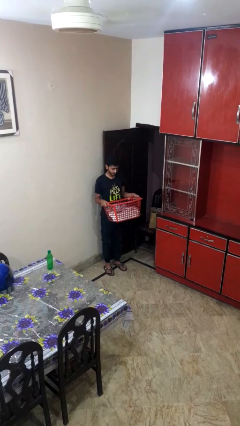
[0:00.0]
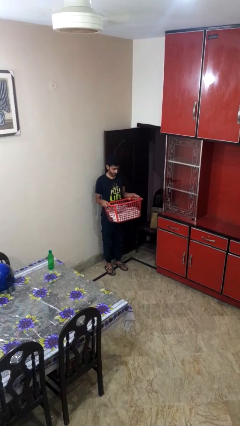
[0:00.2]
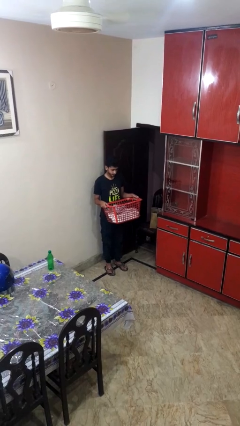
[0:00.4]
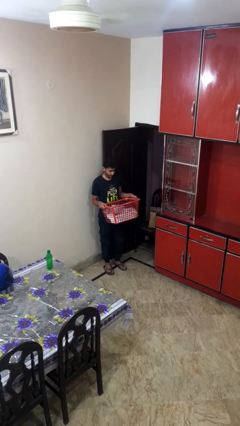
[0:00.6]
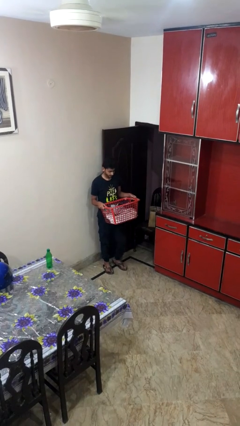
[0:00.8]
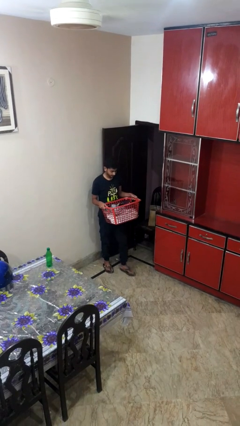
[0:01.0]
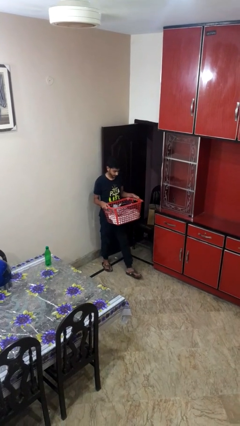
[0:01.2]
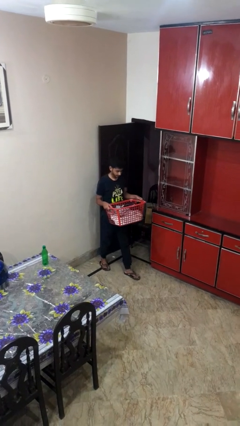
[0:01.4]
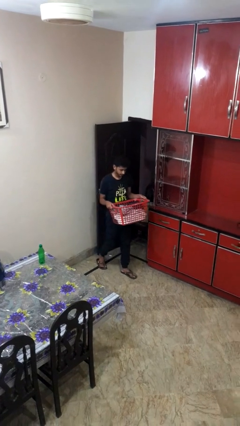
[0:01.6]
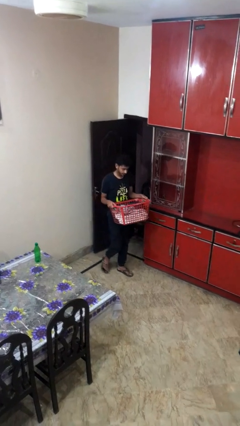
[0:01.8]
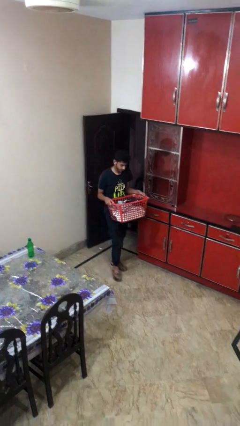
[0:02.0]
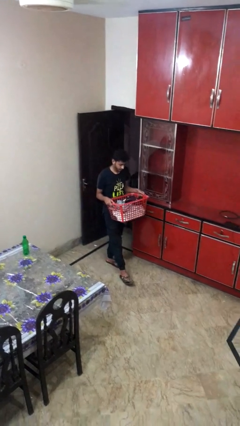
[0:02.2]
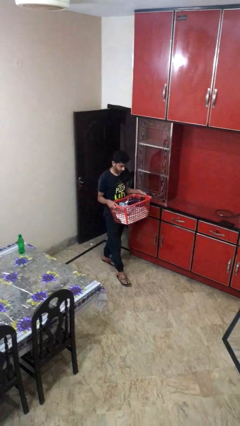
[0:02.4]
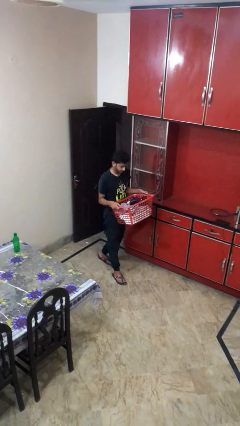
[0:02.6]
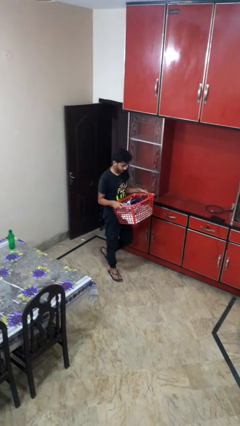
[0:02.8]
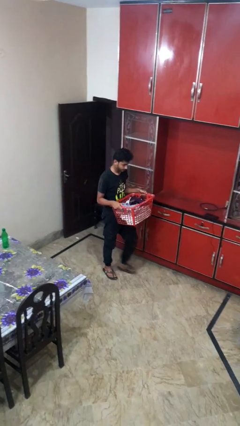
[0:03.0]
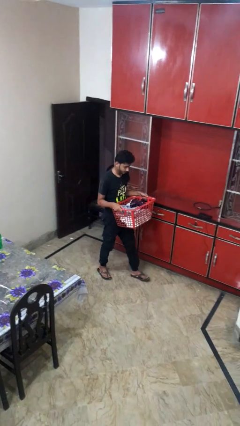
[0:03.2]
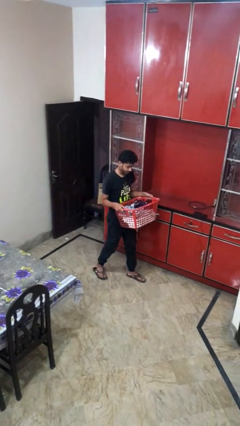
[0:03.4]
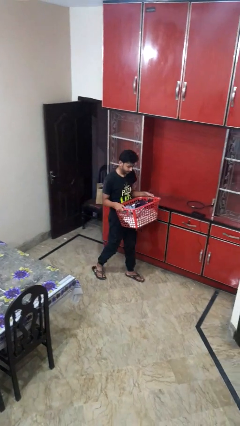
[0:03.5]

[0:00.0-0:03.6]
person carries furniture

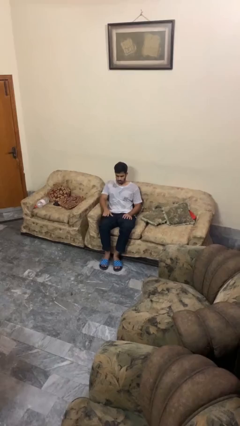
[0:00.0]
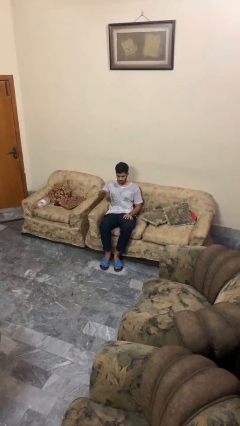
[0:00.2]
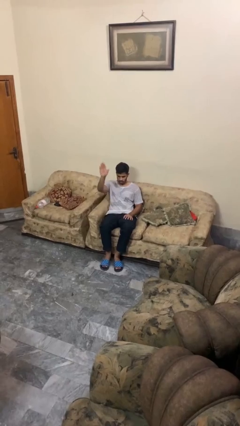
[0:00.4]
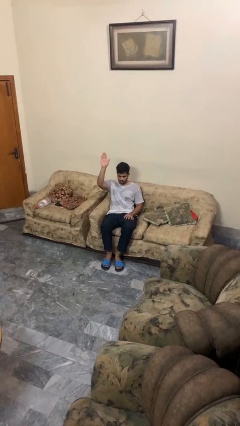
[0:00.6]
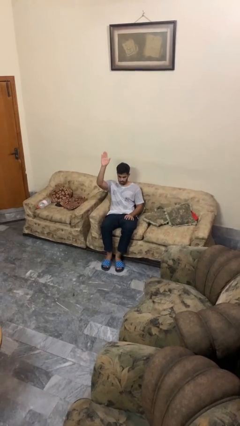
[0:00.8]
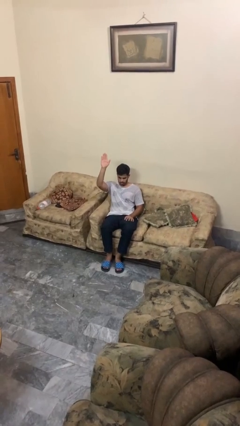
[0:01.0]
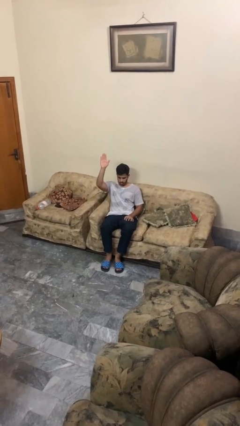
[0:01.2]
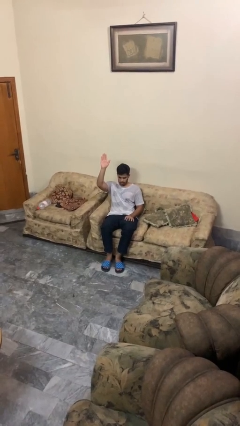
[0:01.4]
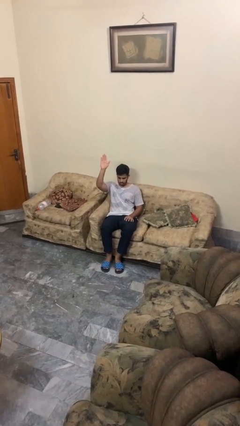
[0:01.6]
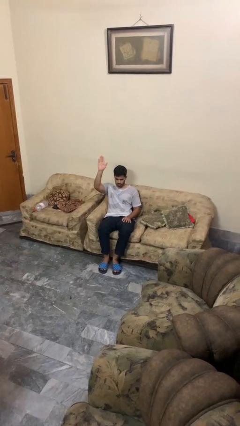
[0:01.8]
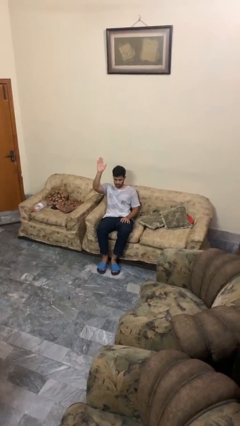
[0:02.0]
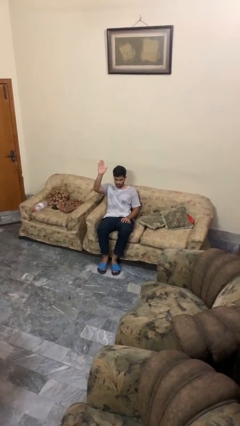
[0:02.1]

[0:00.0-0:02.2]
person gestures raise hand

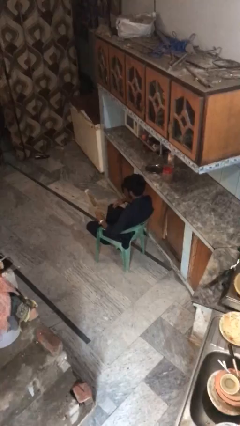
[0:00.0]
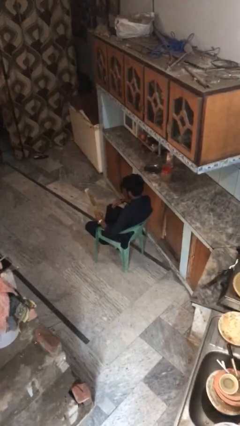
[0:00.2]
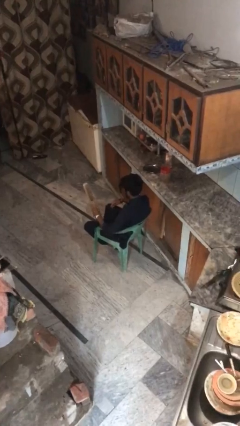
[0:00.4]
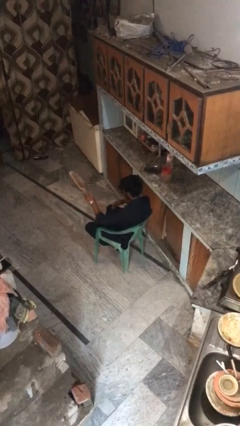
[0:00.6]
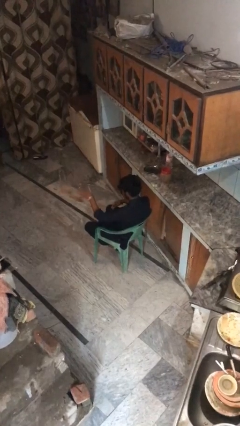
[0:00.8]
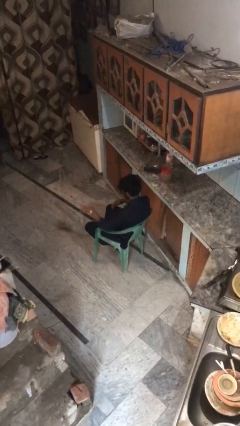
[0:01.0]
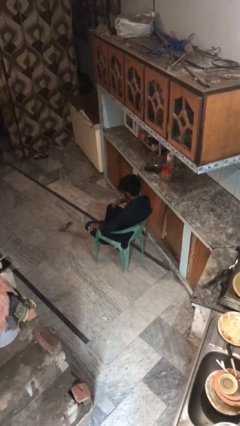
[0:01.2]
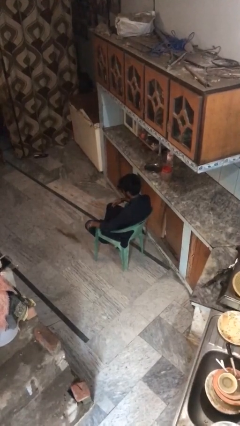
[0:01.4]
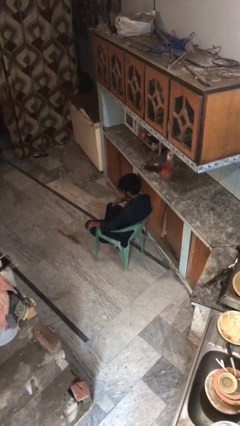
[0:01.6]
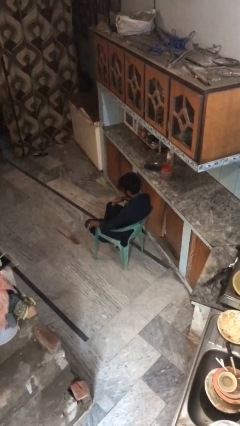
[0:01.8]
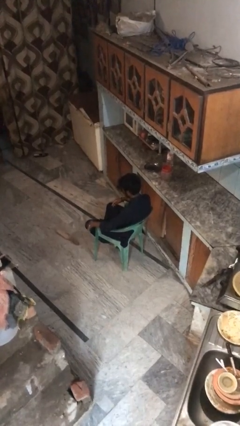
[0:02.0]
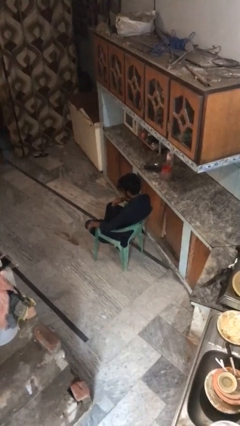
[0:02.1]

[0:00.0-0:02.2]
person throws object to ground

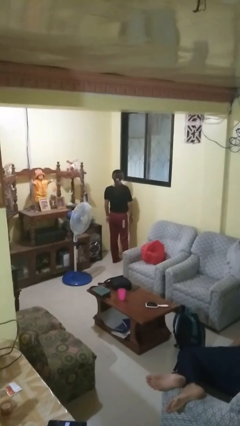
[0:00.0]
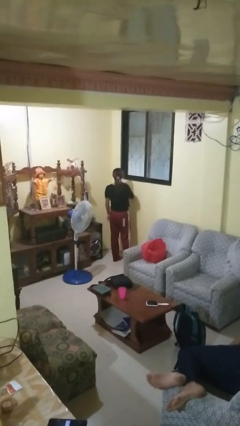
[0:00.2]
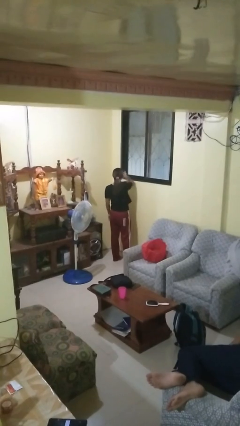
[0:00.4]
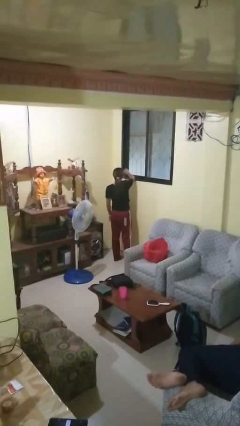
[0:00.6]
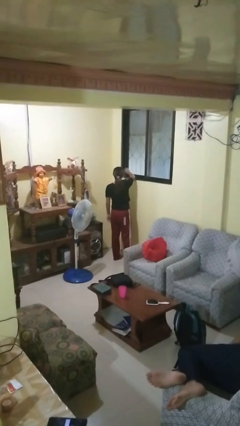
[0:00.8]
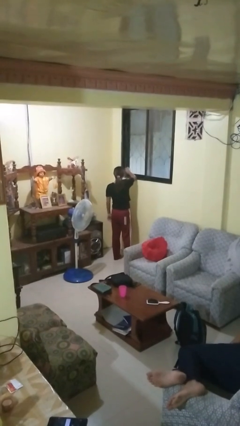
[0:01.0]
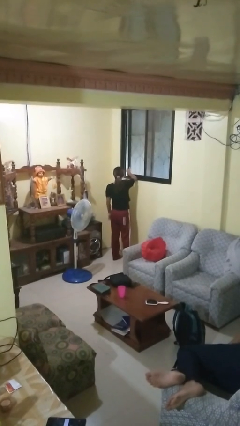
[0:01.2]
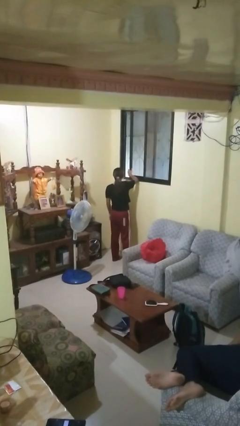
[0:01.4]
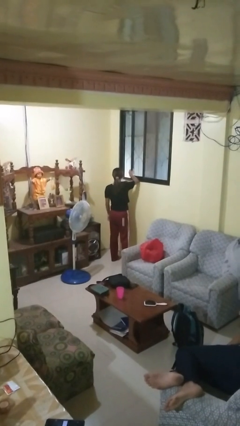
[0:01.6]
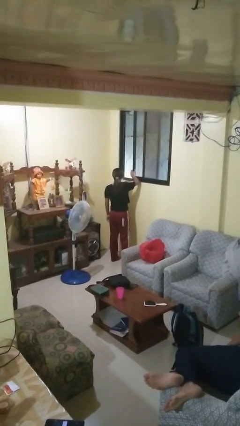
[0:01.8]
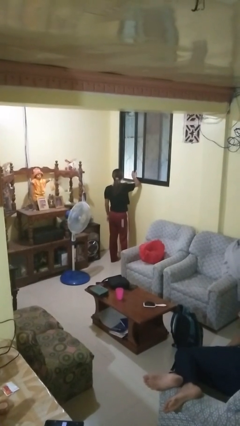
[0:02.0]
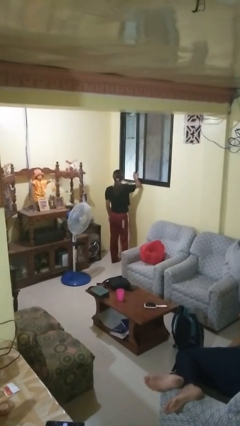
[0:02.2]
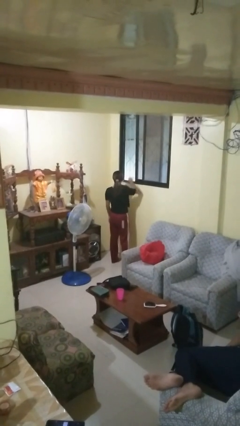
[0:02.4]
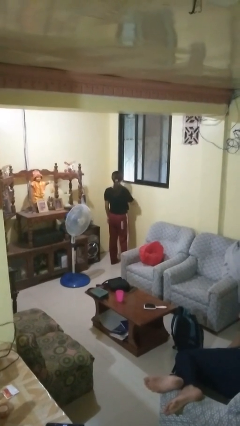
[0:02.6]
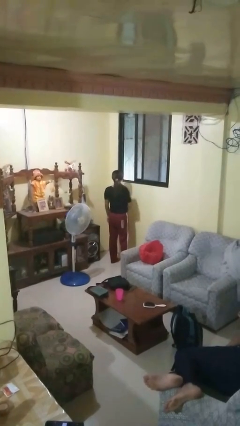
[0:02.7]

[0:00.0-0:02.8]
person opens home window

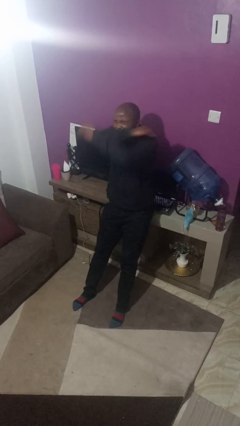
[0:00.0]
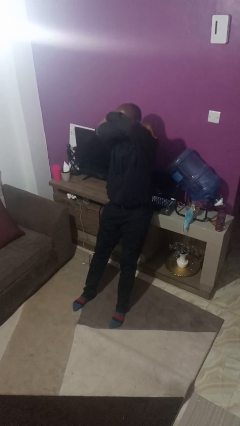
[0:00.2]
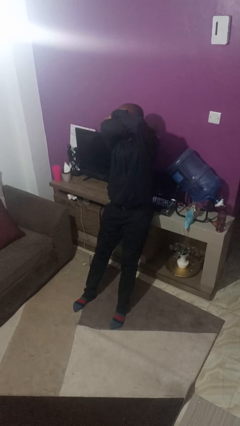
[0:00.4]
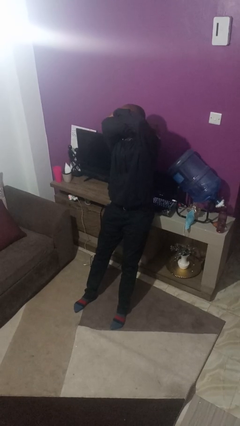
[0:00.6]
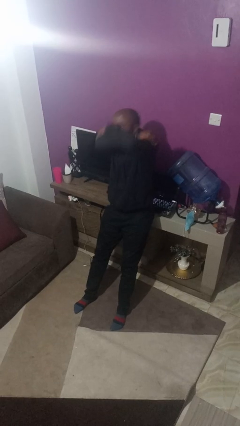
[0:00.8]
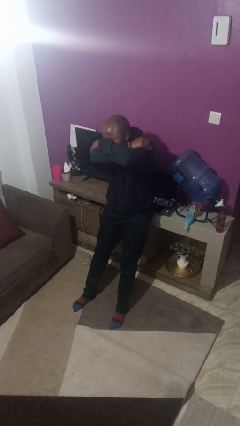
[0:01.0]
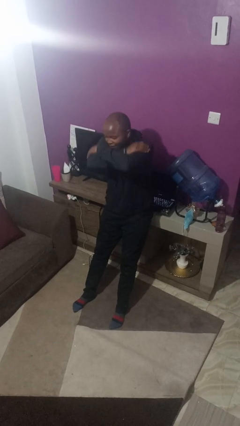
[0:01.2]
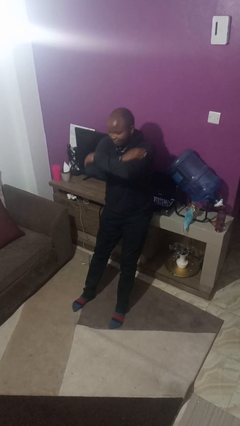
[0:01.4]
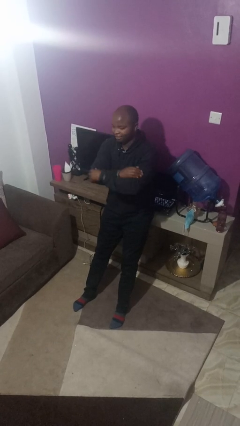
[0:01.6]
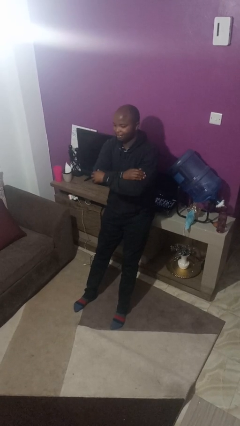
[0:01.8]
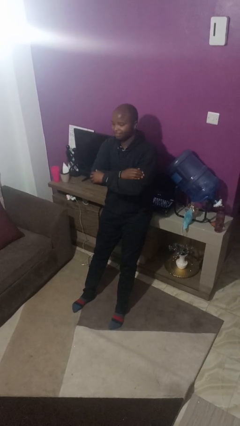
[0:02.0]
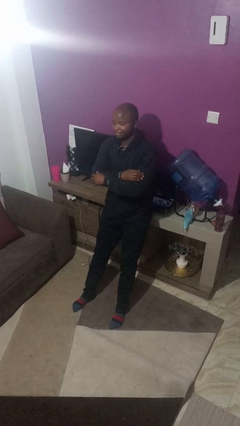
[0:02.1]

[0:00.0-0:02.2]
person sneezes into hand

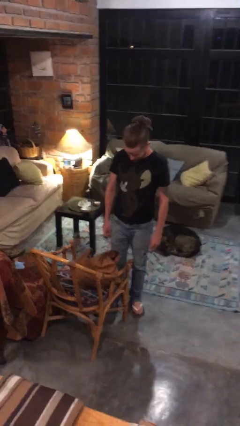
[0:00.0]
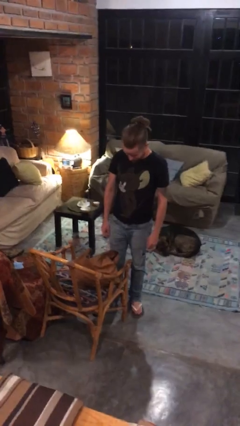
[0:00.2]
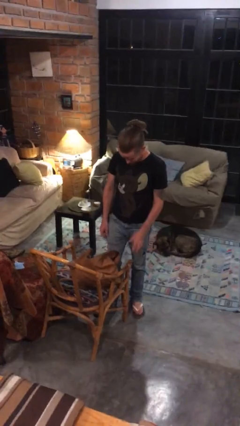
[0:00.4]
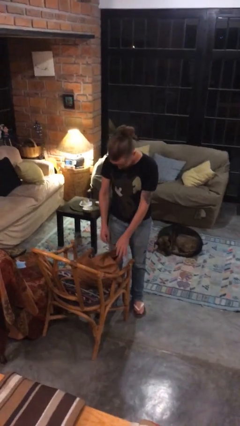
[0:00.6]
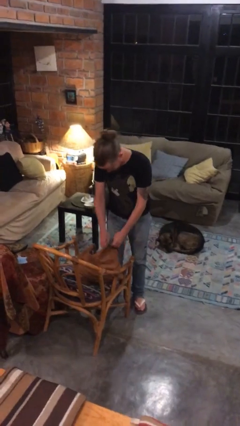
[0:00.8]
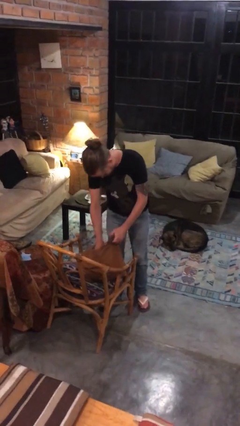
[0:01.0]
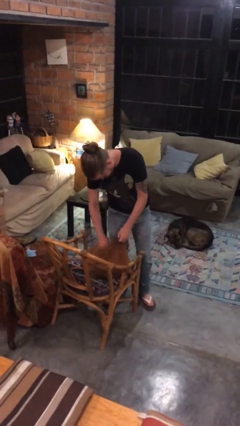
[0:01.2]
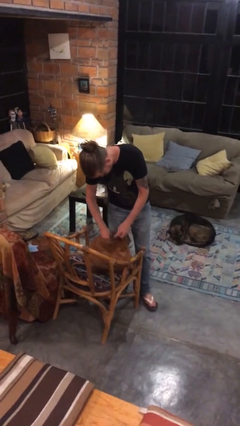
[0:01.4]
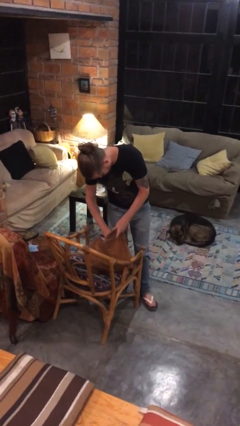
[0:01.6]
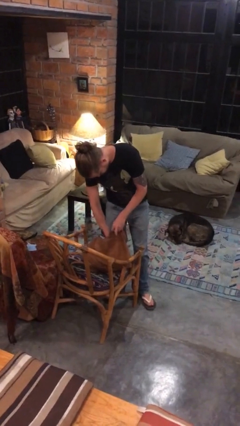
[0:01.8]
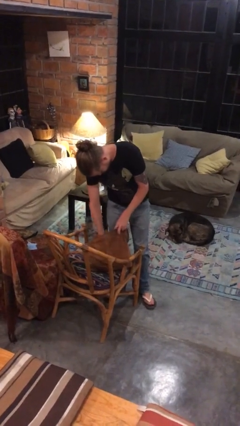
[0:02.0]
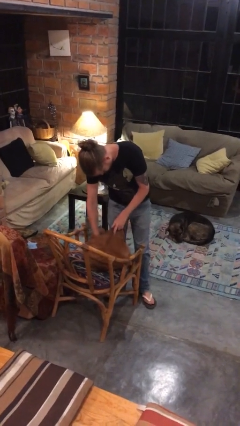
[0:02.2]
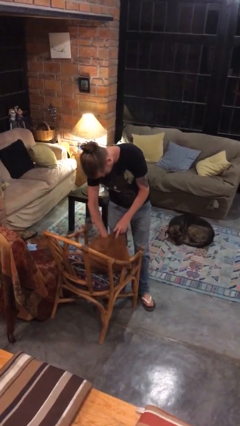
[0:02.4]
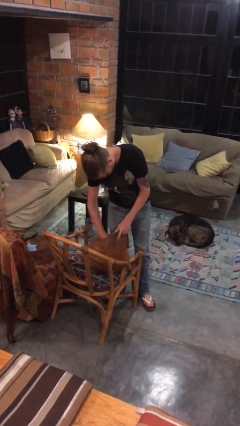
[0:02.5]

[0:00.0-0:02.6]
person searches in purse

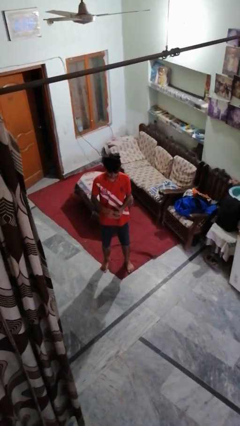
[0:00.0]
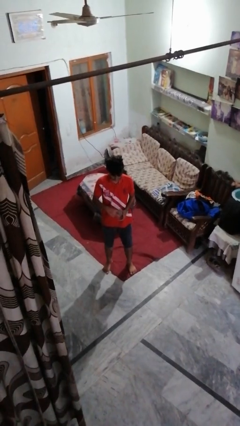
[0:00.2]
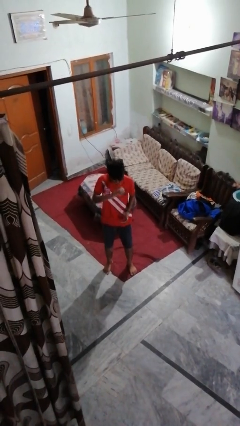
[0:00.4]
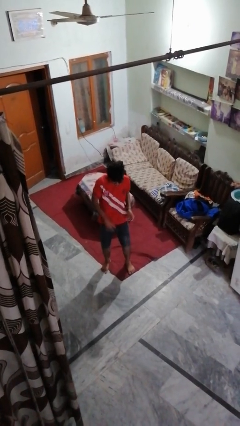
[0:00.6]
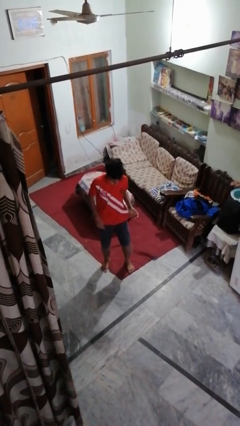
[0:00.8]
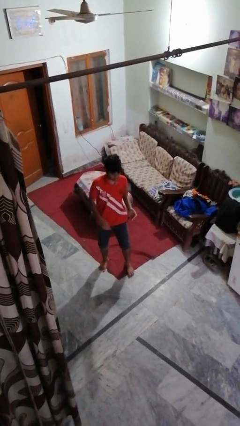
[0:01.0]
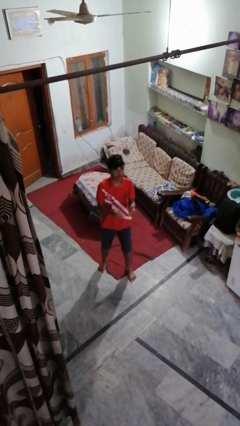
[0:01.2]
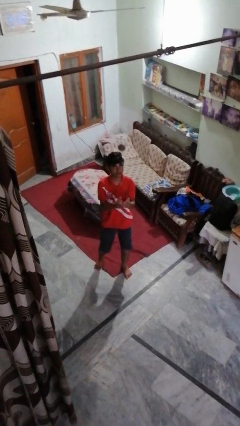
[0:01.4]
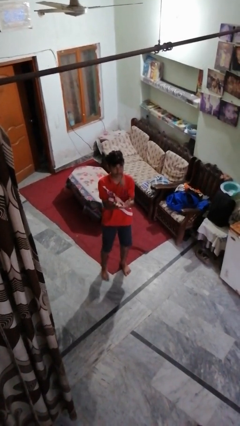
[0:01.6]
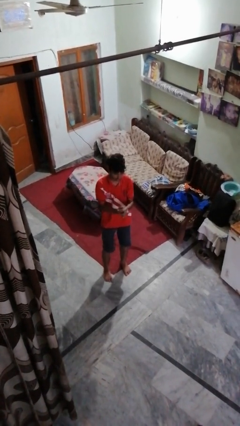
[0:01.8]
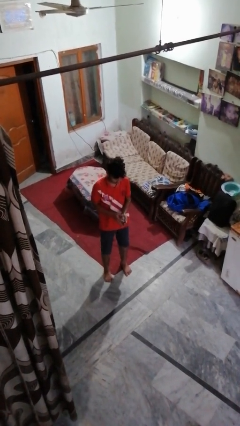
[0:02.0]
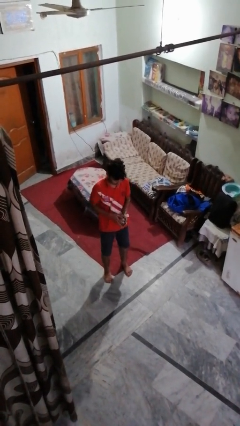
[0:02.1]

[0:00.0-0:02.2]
person bounces ball on floor
